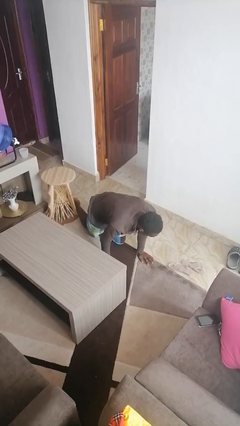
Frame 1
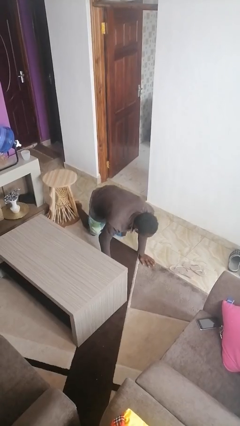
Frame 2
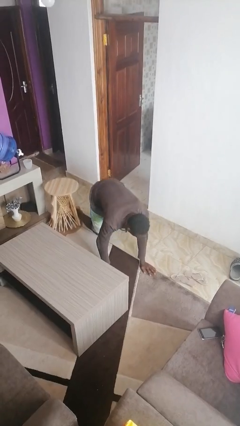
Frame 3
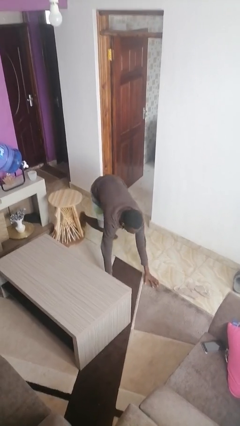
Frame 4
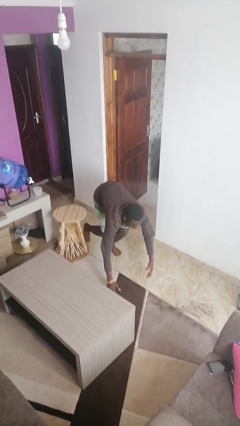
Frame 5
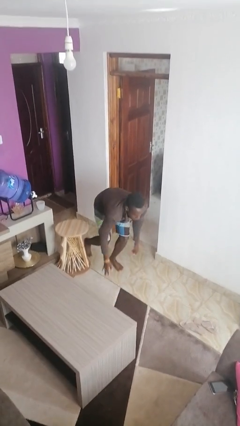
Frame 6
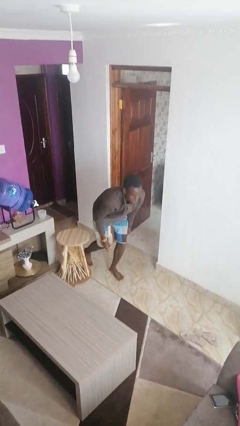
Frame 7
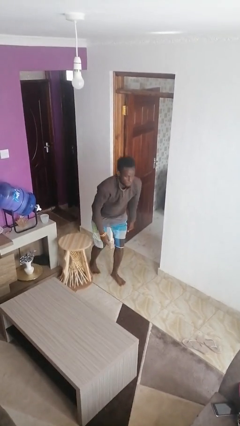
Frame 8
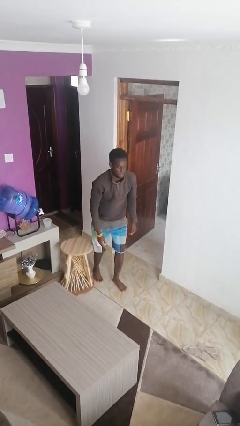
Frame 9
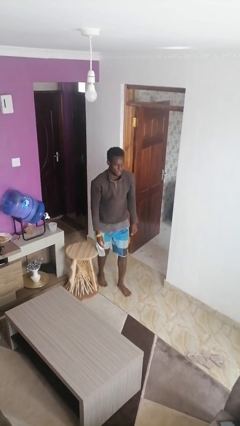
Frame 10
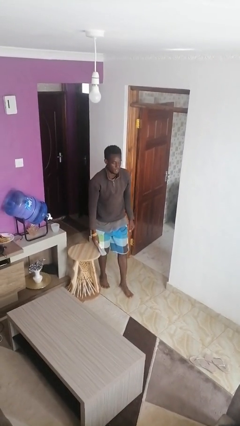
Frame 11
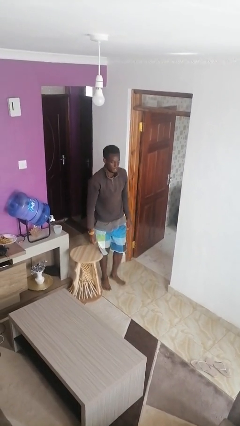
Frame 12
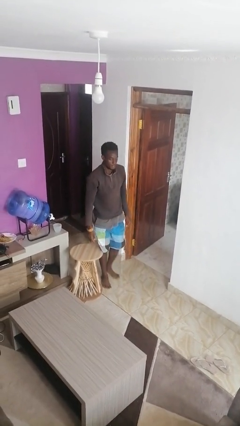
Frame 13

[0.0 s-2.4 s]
person stands up from floor

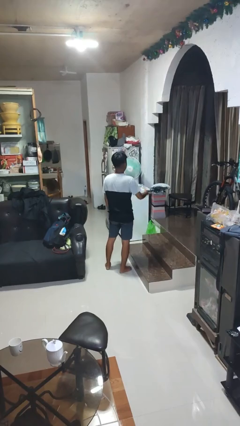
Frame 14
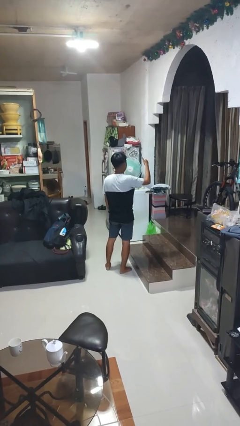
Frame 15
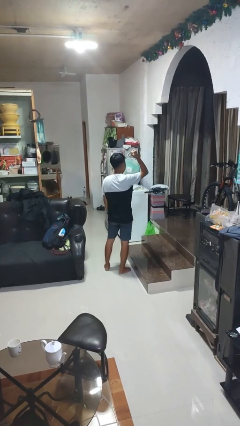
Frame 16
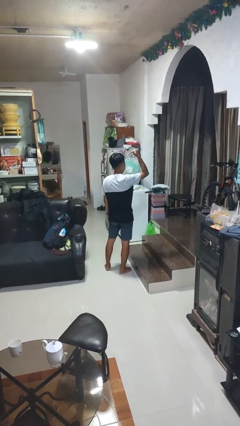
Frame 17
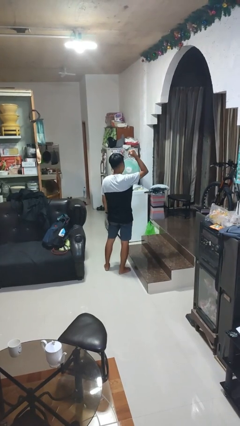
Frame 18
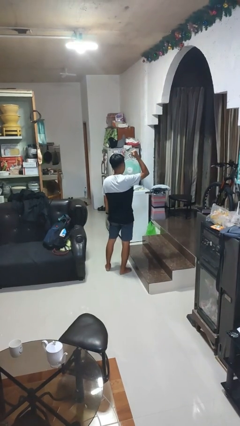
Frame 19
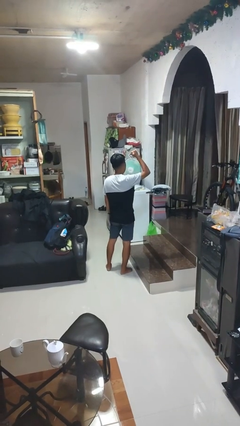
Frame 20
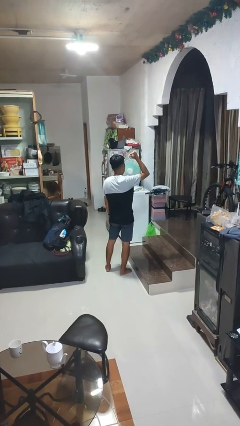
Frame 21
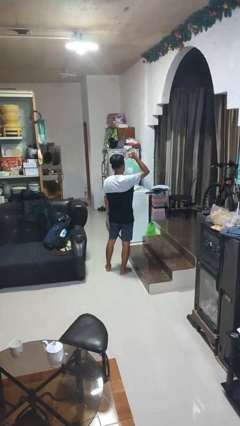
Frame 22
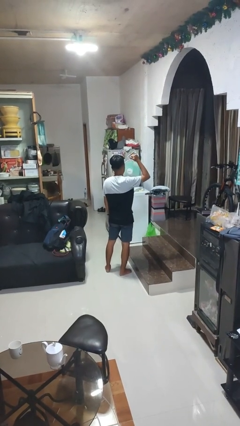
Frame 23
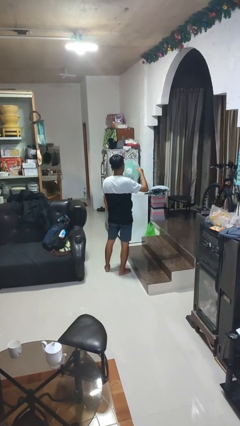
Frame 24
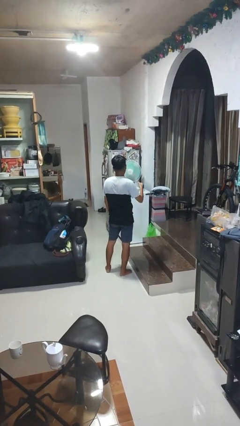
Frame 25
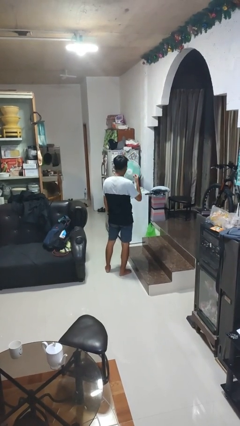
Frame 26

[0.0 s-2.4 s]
person gestures behind me

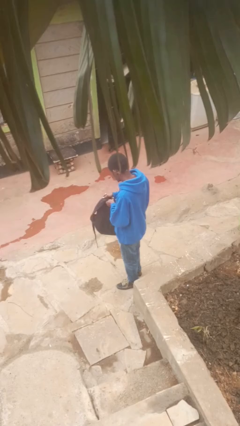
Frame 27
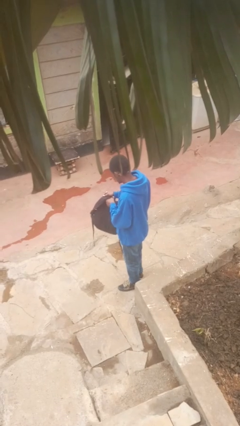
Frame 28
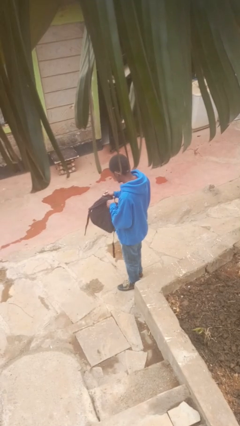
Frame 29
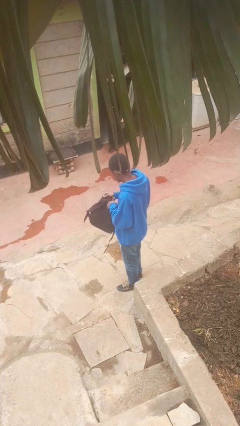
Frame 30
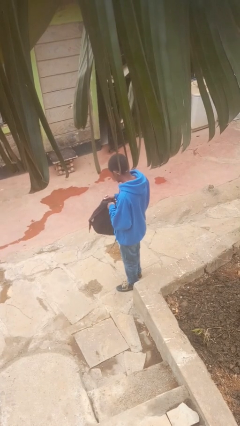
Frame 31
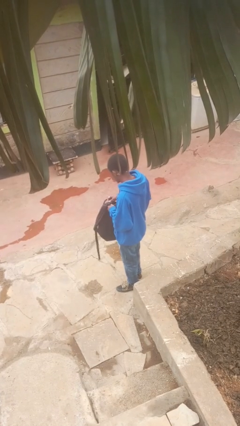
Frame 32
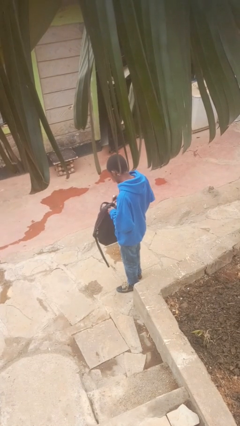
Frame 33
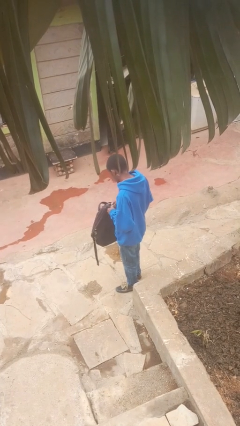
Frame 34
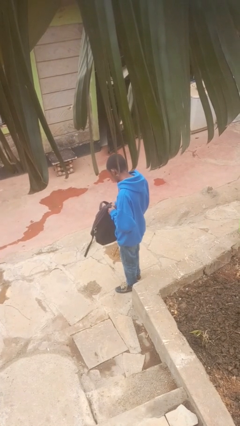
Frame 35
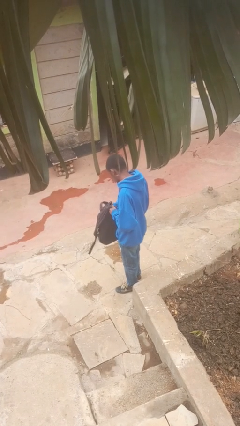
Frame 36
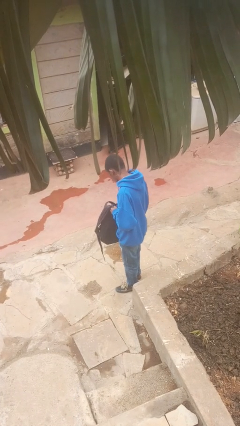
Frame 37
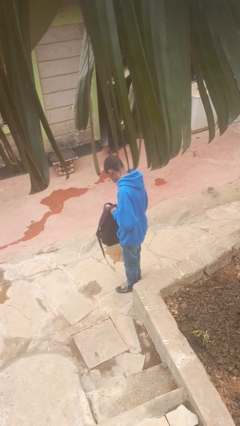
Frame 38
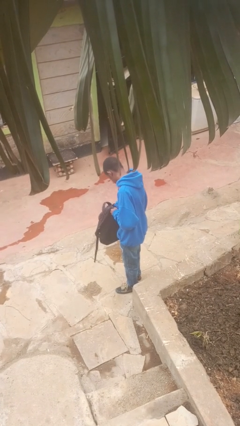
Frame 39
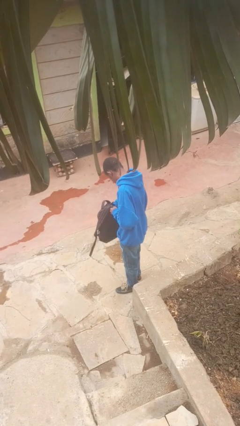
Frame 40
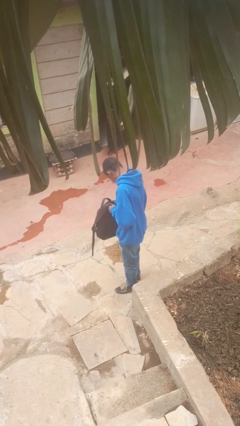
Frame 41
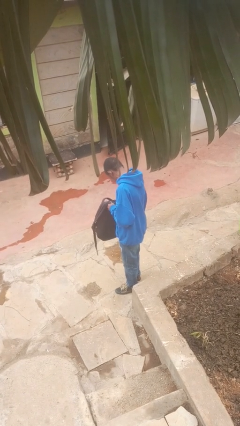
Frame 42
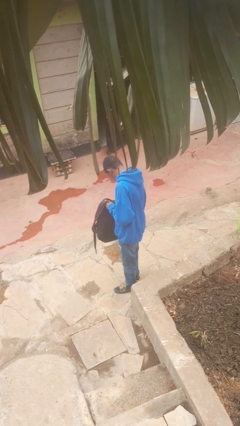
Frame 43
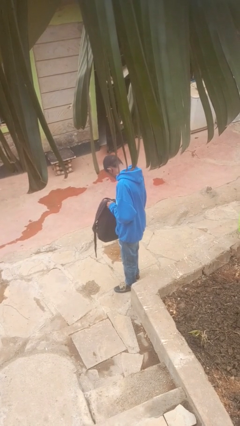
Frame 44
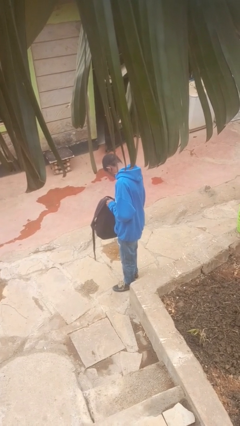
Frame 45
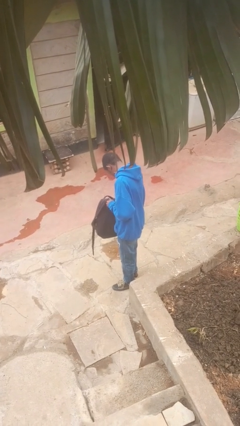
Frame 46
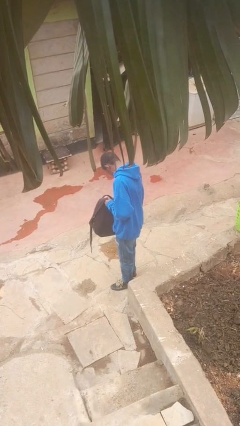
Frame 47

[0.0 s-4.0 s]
person searches in backpack

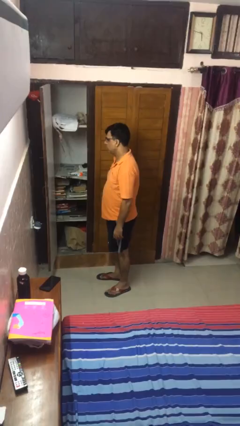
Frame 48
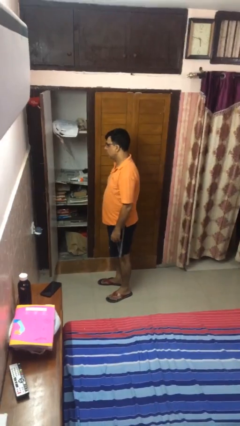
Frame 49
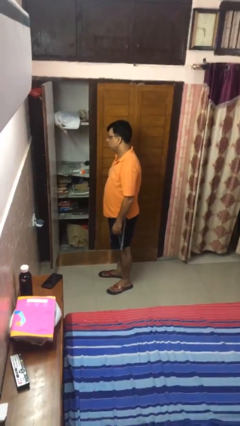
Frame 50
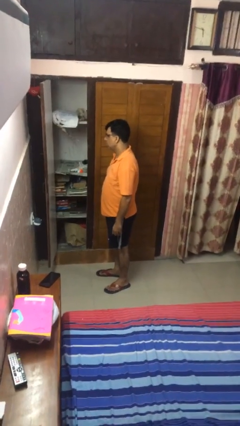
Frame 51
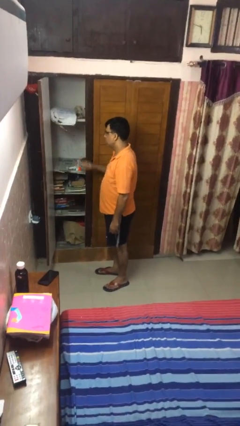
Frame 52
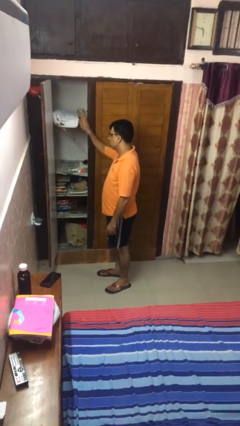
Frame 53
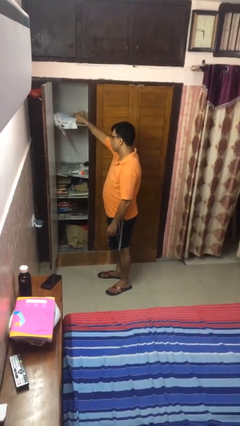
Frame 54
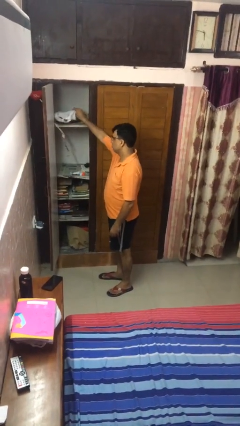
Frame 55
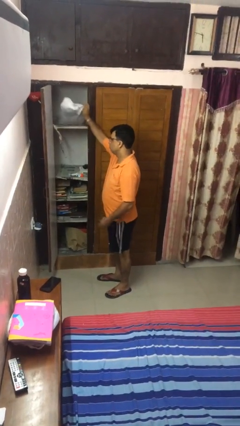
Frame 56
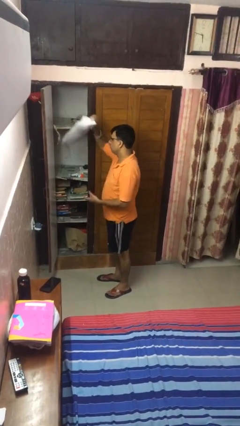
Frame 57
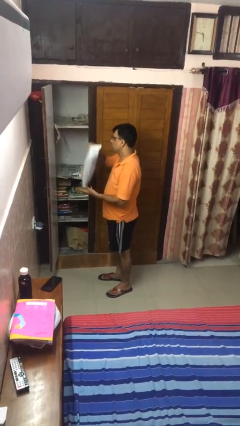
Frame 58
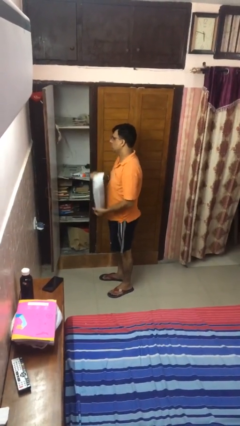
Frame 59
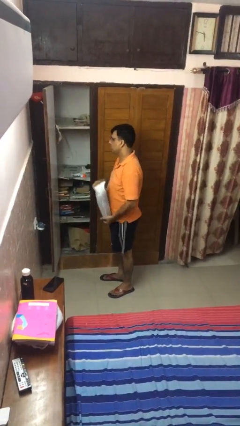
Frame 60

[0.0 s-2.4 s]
person picks up object from shelf

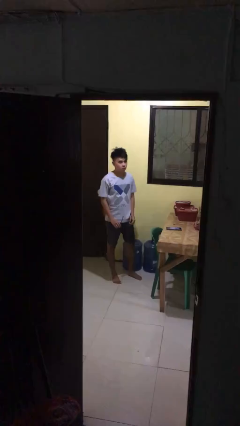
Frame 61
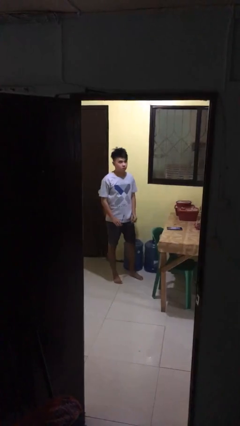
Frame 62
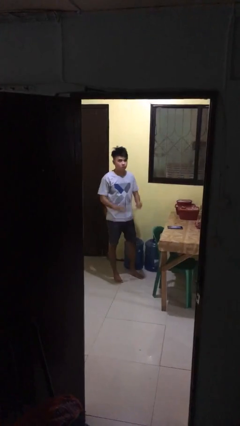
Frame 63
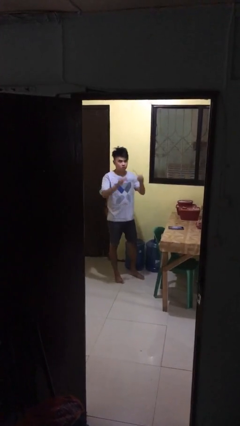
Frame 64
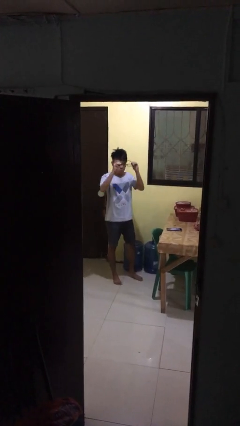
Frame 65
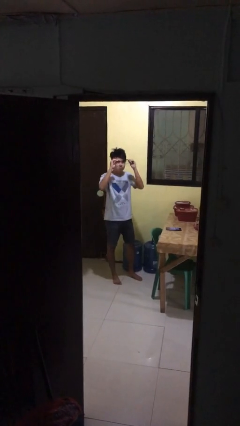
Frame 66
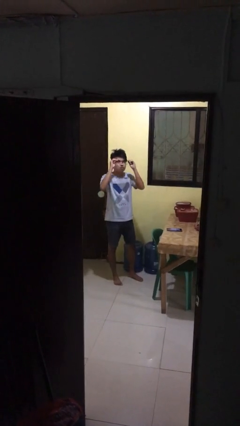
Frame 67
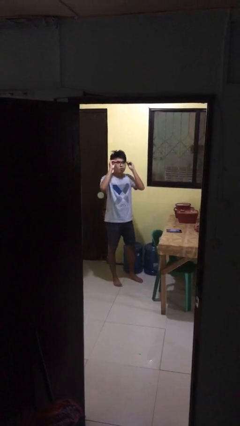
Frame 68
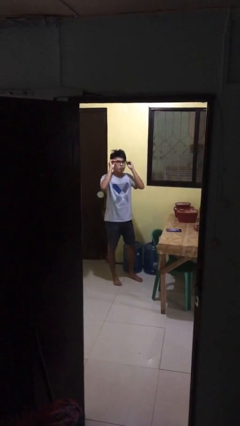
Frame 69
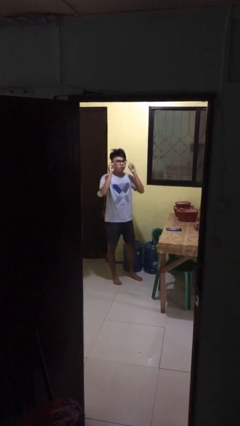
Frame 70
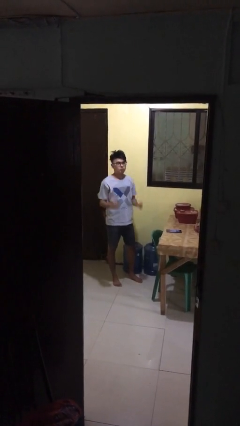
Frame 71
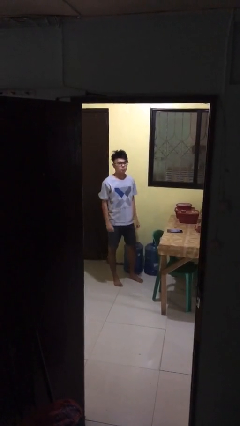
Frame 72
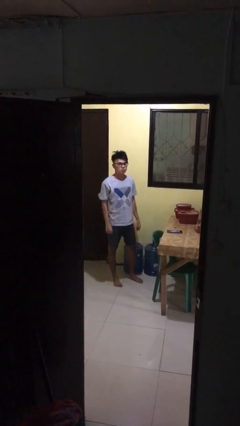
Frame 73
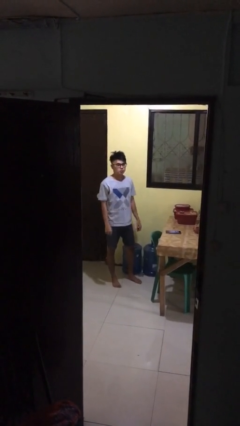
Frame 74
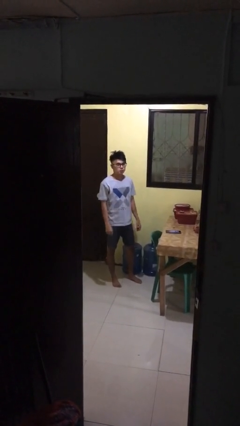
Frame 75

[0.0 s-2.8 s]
person puts on glasses

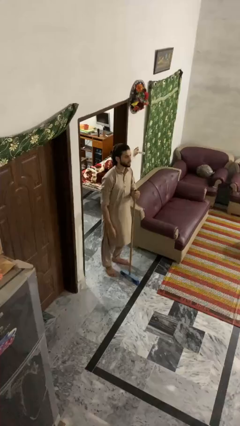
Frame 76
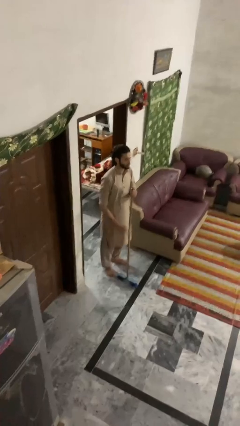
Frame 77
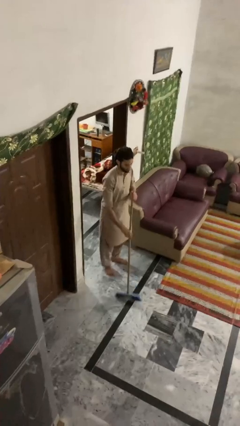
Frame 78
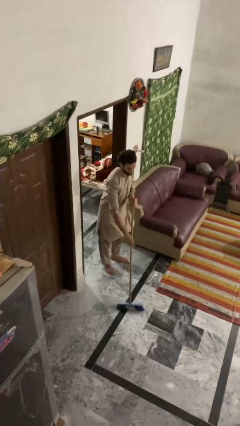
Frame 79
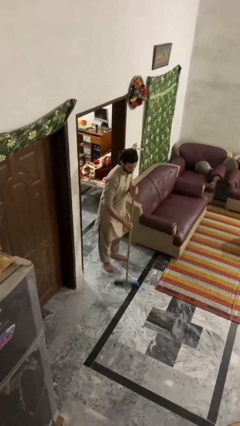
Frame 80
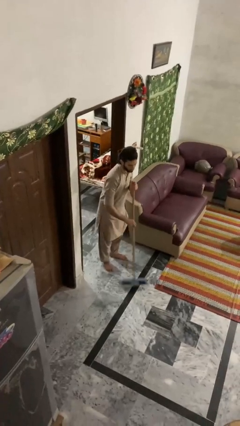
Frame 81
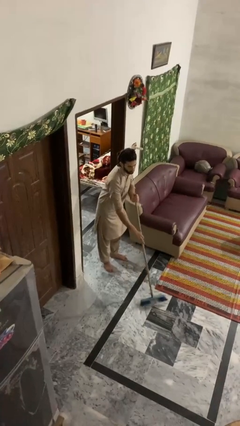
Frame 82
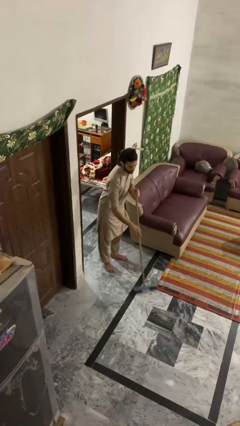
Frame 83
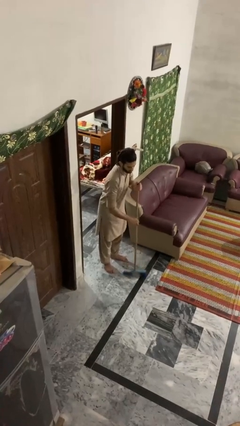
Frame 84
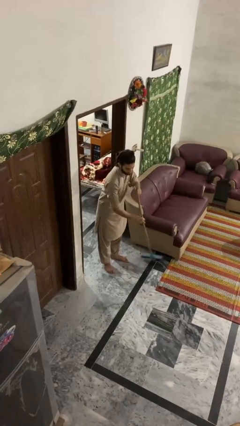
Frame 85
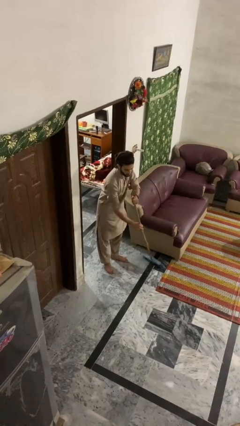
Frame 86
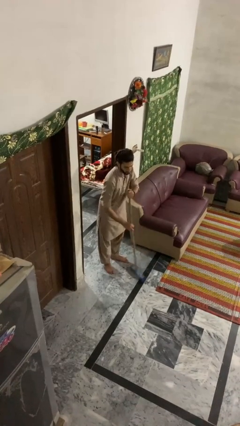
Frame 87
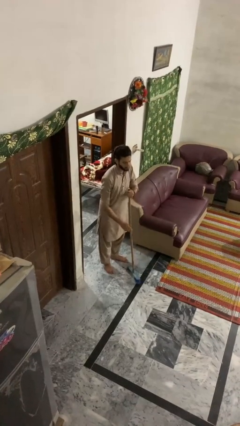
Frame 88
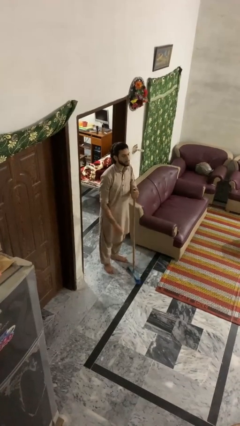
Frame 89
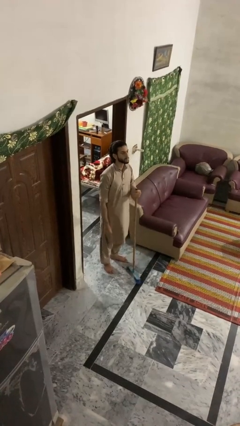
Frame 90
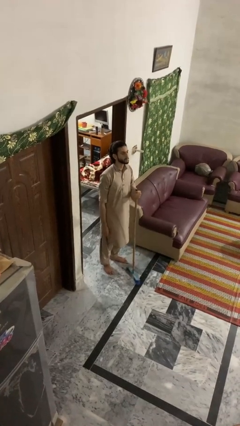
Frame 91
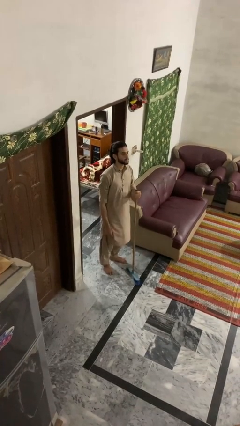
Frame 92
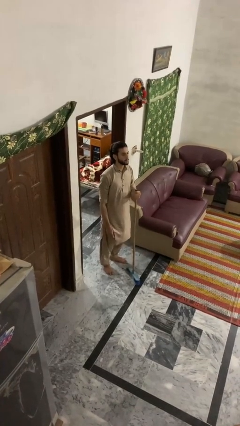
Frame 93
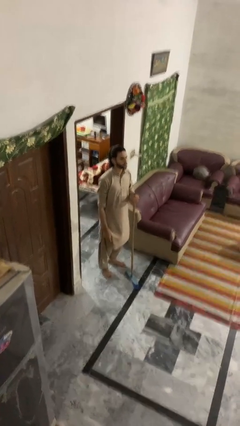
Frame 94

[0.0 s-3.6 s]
person sweeps floor
